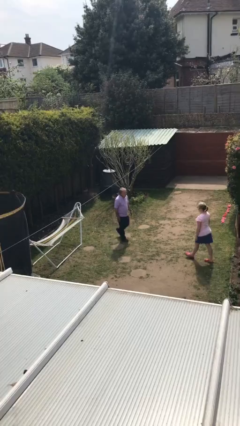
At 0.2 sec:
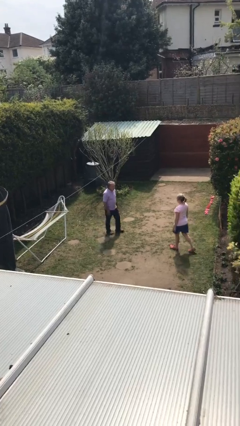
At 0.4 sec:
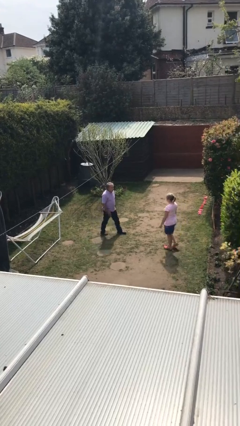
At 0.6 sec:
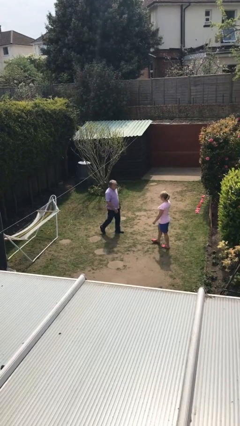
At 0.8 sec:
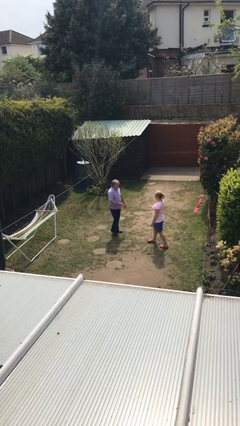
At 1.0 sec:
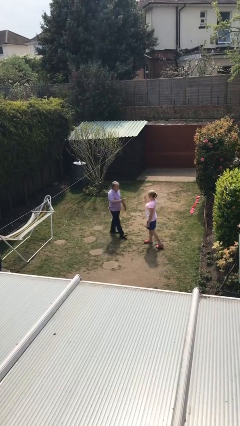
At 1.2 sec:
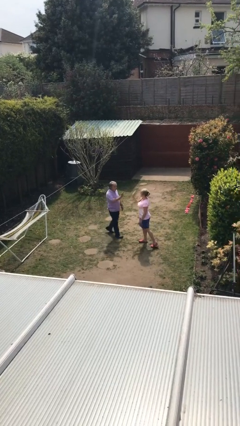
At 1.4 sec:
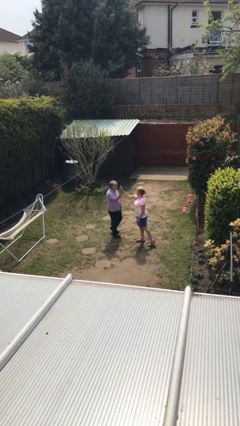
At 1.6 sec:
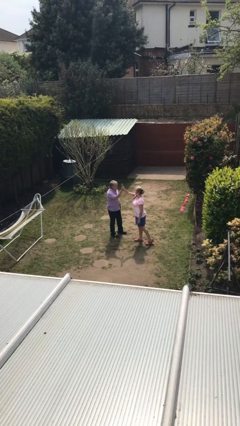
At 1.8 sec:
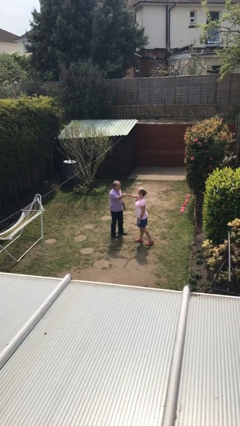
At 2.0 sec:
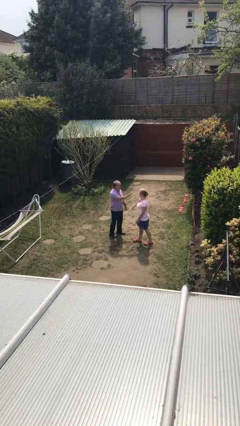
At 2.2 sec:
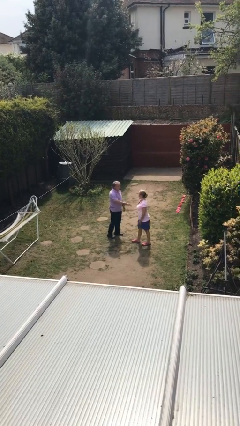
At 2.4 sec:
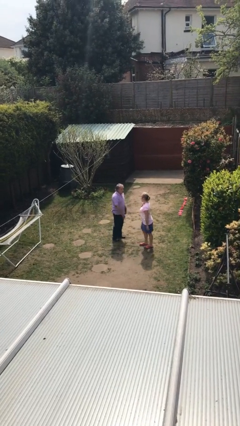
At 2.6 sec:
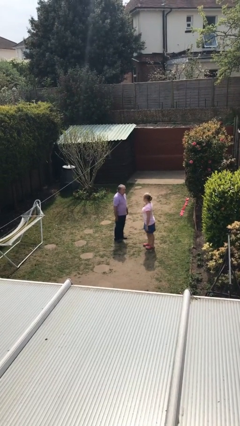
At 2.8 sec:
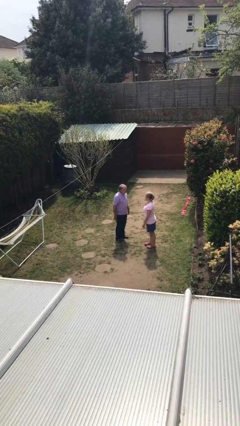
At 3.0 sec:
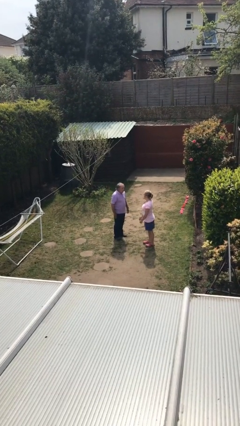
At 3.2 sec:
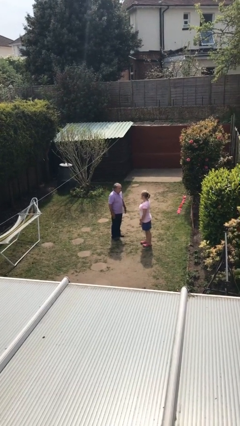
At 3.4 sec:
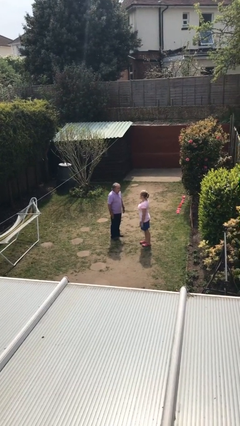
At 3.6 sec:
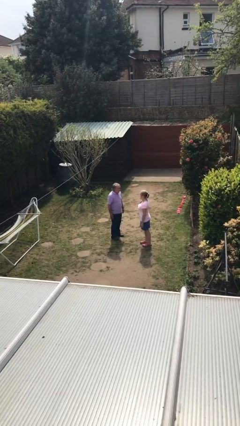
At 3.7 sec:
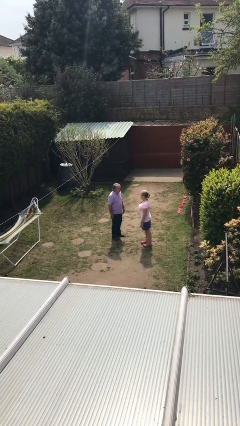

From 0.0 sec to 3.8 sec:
person highfives hand

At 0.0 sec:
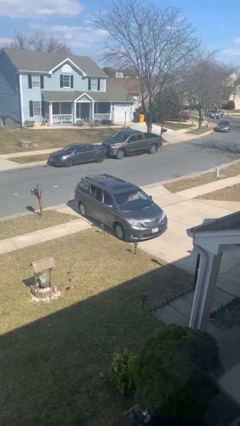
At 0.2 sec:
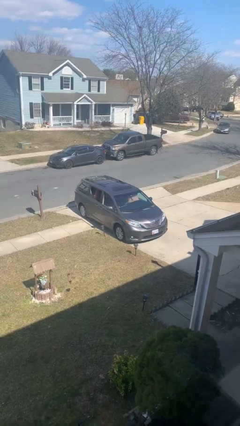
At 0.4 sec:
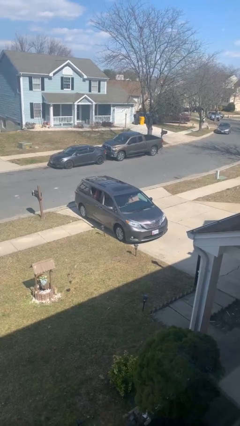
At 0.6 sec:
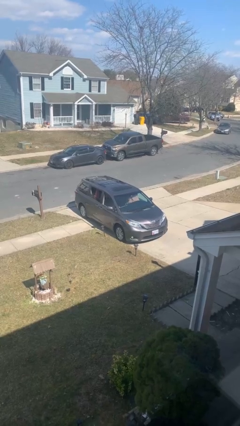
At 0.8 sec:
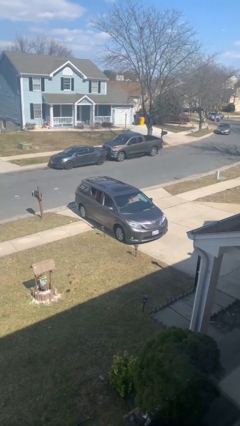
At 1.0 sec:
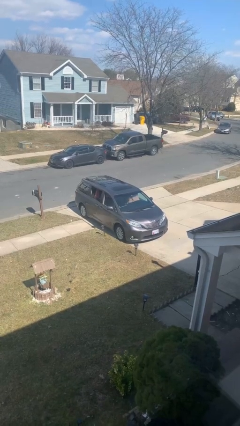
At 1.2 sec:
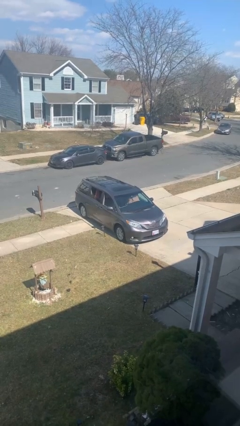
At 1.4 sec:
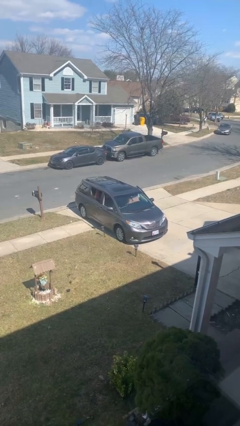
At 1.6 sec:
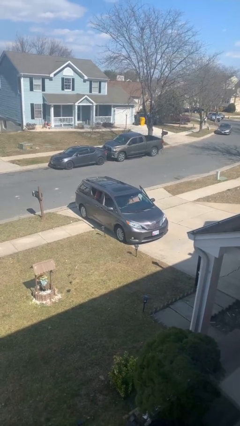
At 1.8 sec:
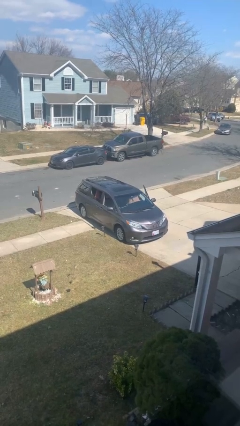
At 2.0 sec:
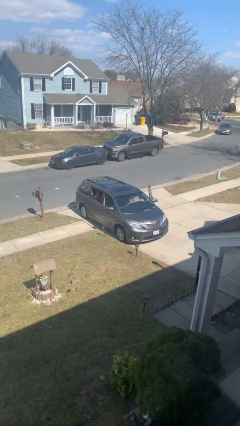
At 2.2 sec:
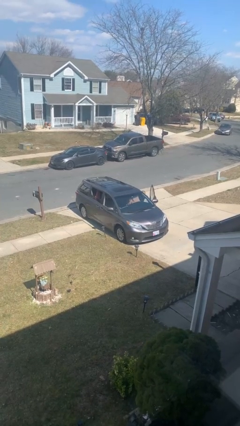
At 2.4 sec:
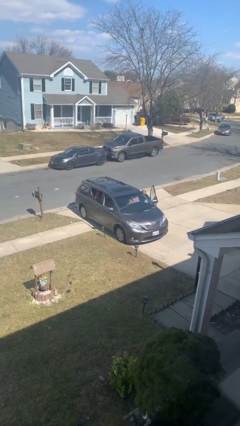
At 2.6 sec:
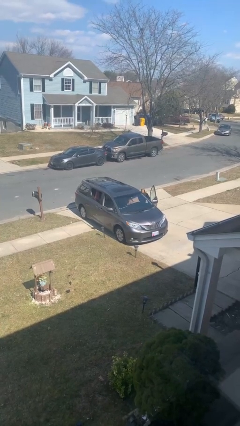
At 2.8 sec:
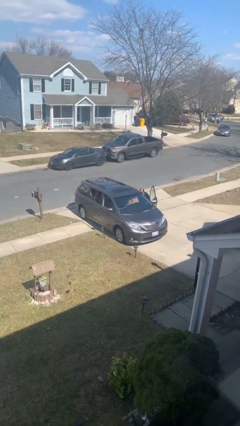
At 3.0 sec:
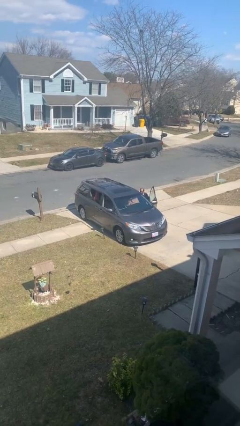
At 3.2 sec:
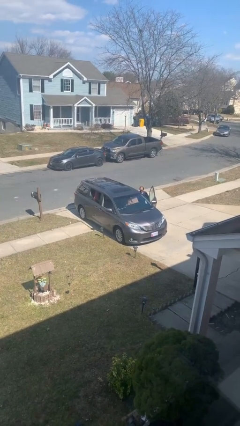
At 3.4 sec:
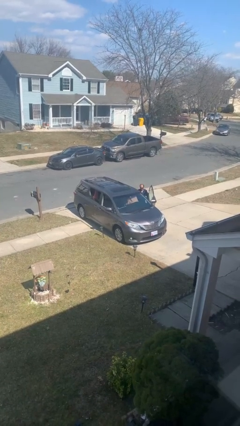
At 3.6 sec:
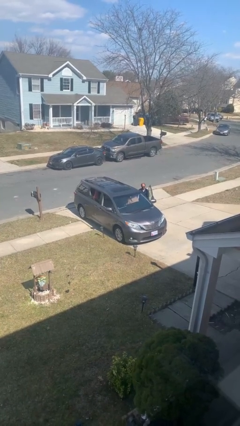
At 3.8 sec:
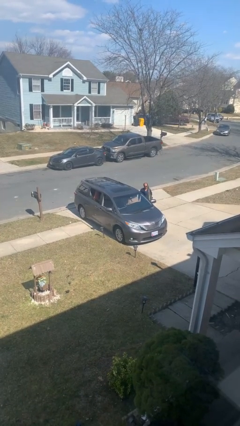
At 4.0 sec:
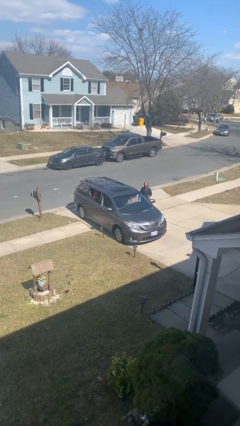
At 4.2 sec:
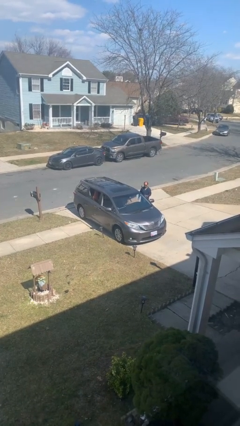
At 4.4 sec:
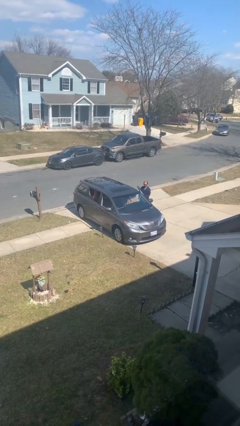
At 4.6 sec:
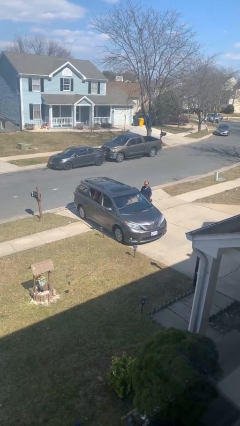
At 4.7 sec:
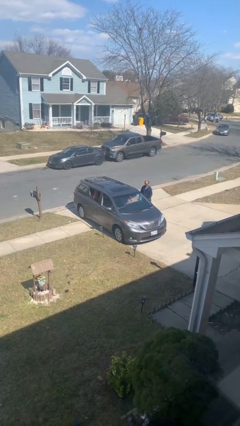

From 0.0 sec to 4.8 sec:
car drops off person

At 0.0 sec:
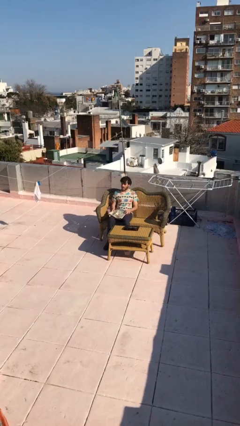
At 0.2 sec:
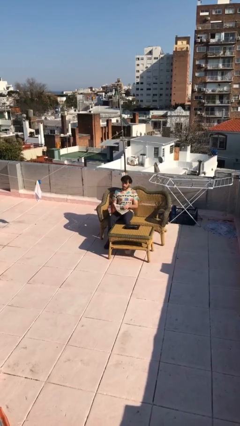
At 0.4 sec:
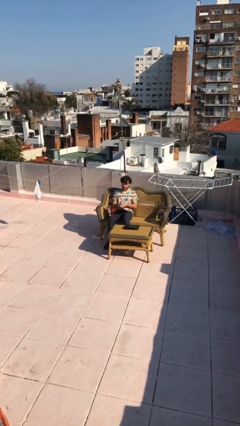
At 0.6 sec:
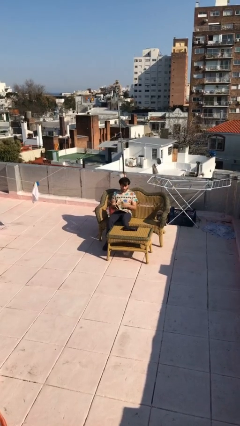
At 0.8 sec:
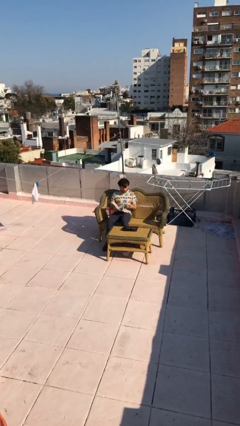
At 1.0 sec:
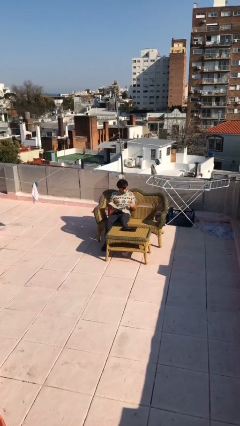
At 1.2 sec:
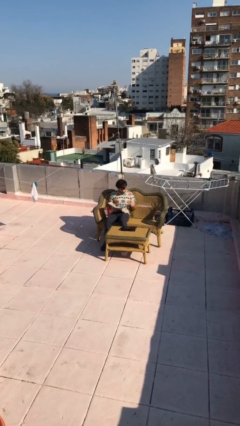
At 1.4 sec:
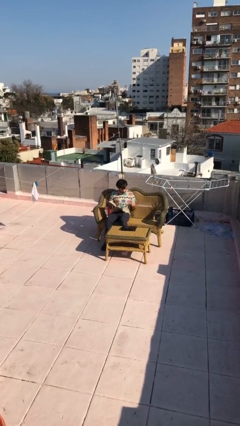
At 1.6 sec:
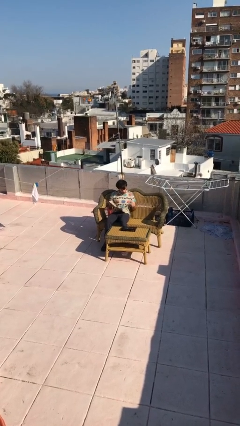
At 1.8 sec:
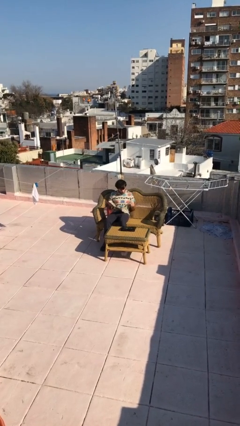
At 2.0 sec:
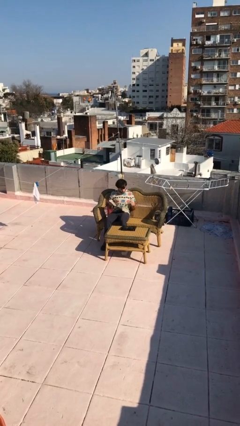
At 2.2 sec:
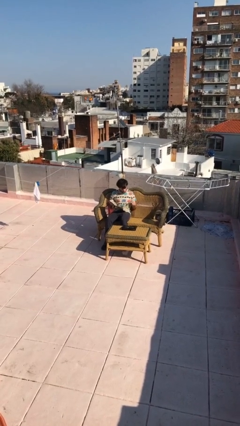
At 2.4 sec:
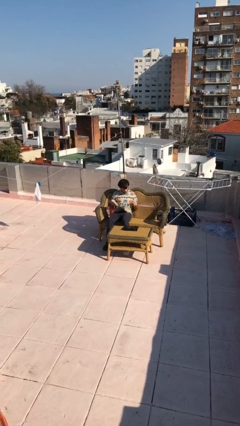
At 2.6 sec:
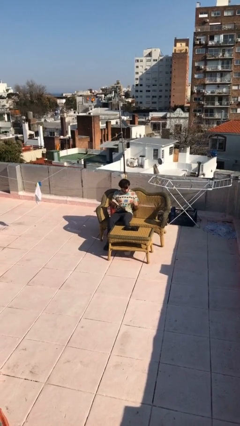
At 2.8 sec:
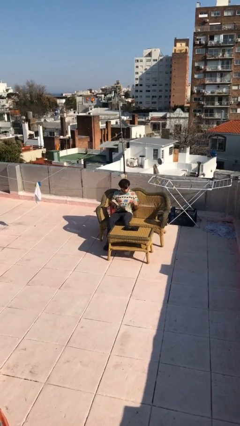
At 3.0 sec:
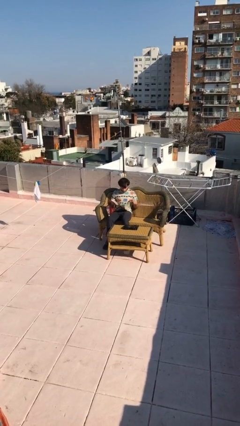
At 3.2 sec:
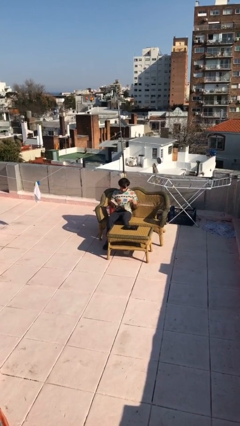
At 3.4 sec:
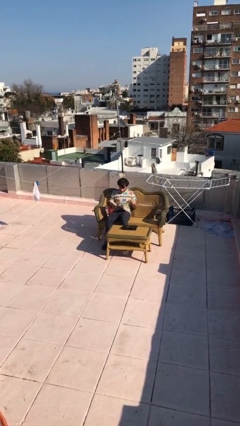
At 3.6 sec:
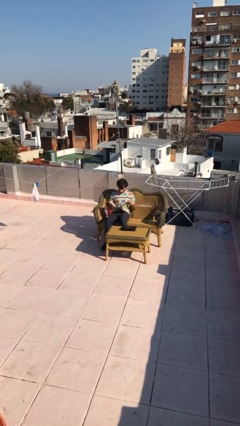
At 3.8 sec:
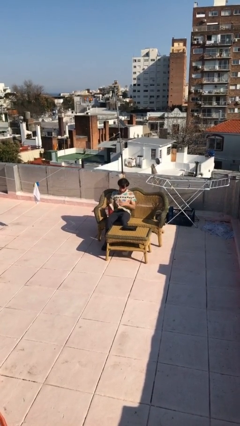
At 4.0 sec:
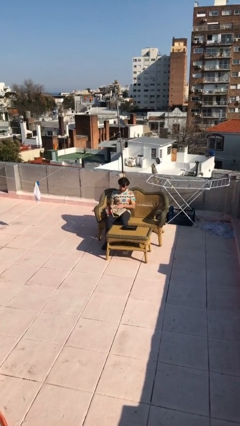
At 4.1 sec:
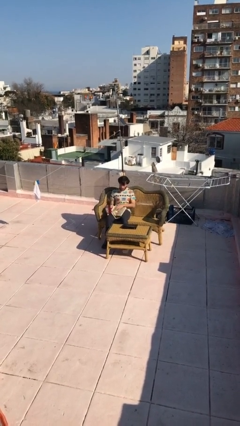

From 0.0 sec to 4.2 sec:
person reads newspaper

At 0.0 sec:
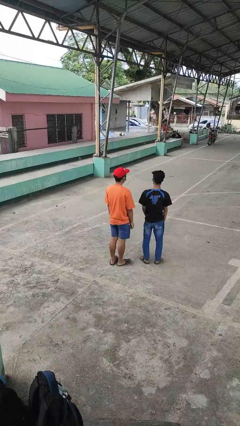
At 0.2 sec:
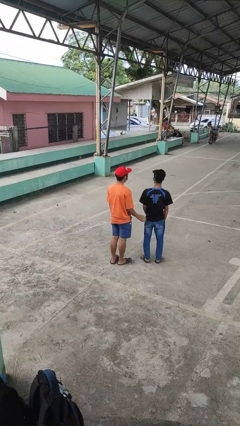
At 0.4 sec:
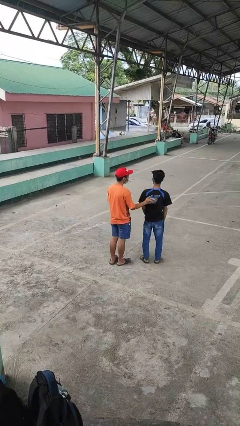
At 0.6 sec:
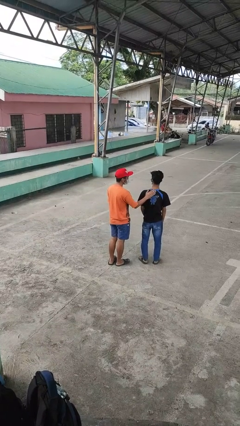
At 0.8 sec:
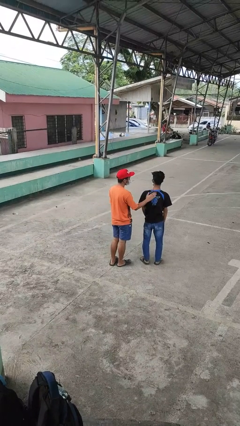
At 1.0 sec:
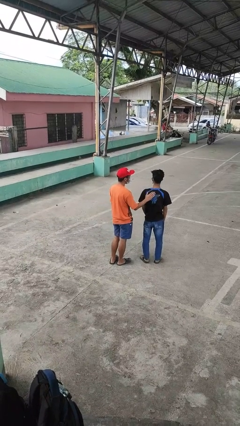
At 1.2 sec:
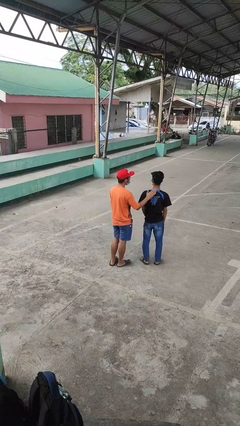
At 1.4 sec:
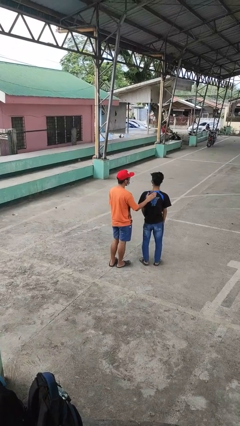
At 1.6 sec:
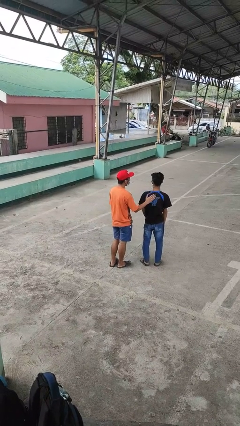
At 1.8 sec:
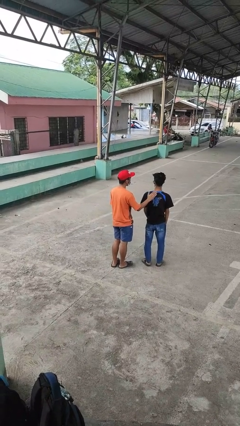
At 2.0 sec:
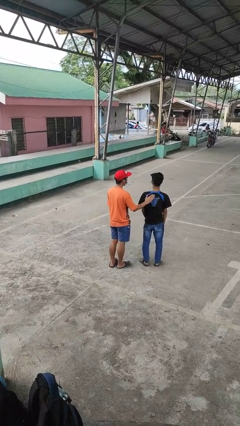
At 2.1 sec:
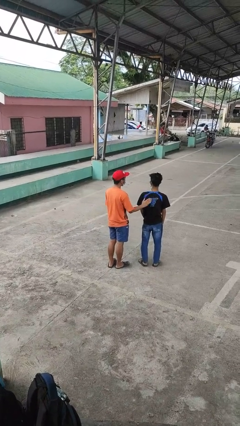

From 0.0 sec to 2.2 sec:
person touches back of person

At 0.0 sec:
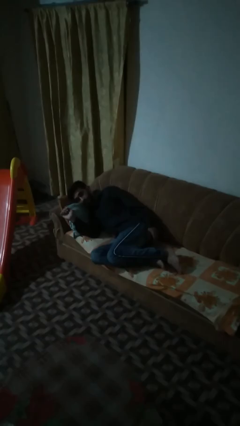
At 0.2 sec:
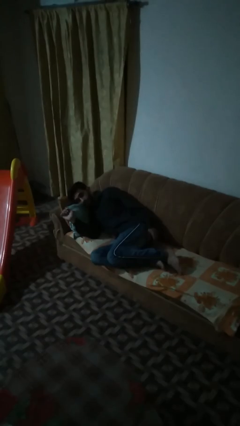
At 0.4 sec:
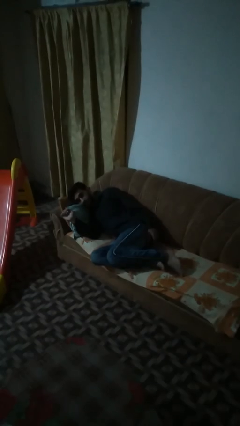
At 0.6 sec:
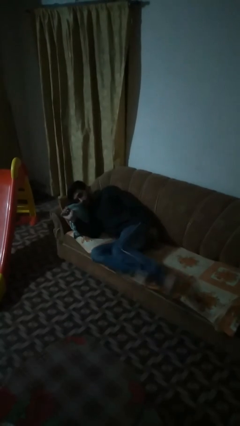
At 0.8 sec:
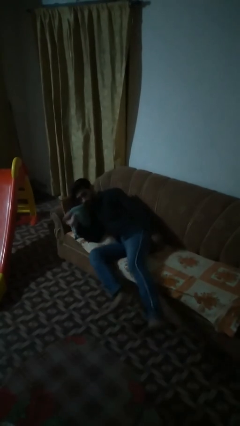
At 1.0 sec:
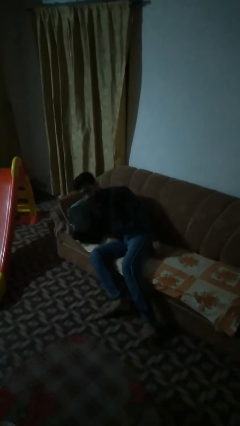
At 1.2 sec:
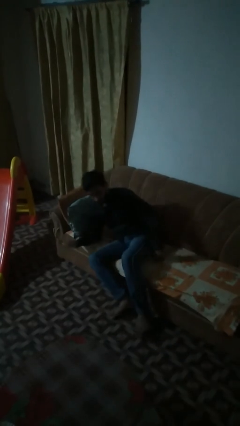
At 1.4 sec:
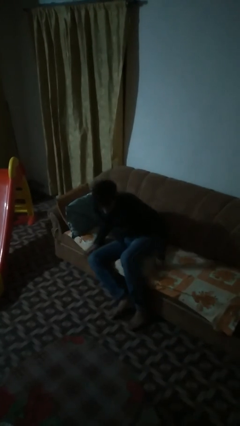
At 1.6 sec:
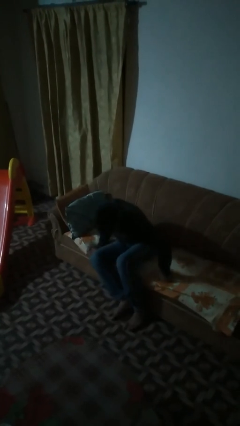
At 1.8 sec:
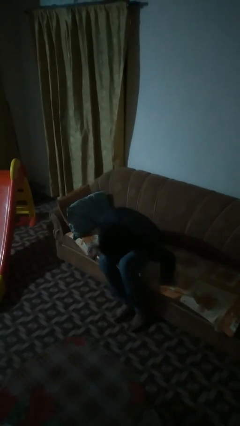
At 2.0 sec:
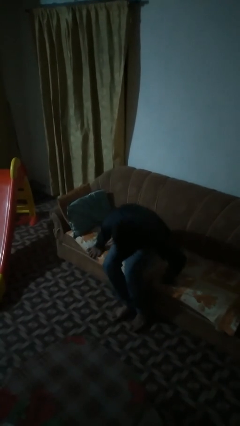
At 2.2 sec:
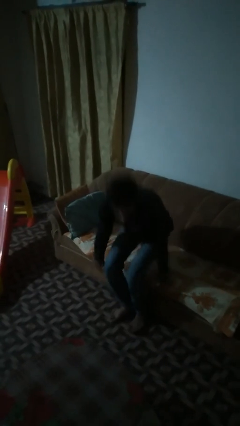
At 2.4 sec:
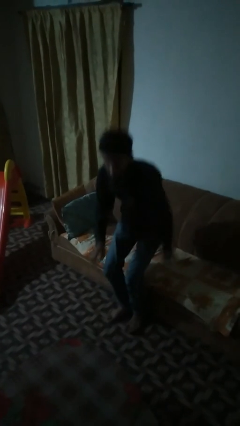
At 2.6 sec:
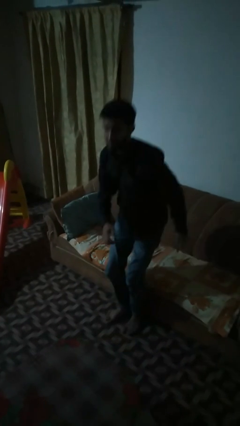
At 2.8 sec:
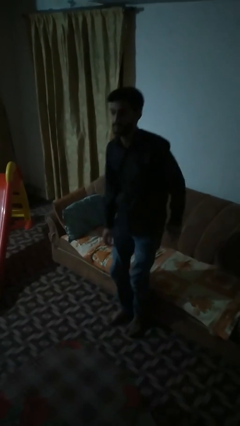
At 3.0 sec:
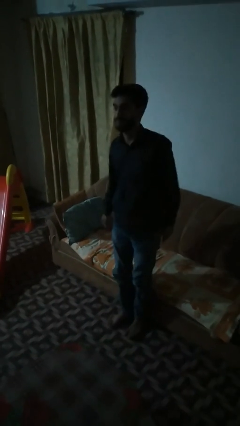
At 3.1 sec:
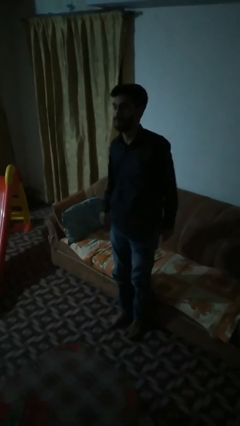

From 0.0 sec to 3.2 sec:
person stands up
